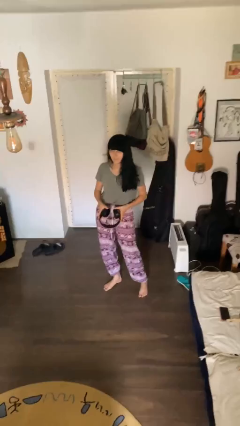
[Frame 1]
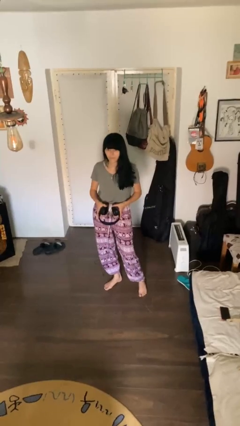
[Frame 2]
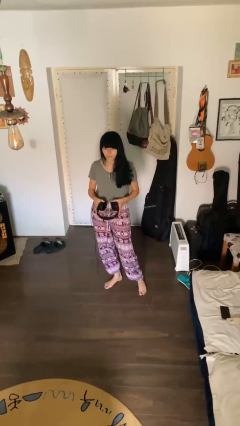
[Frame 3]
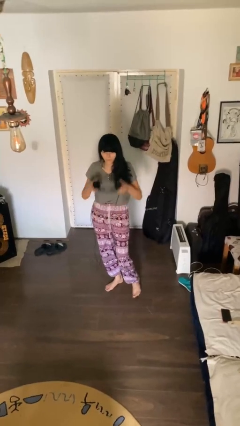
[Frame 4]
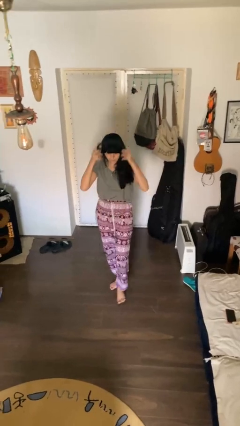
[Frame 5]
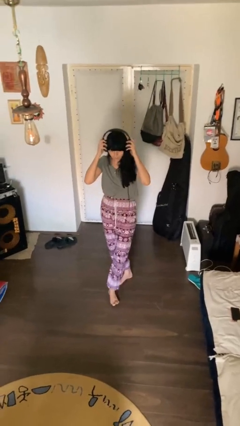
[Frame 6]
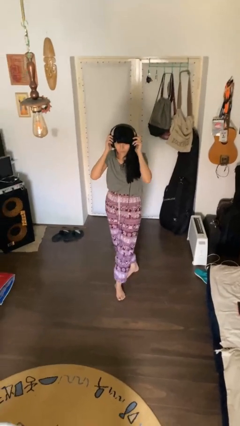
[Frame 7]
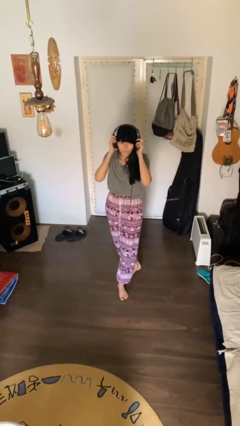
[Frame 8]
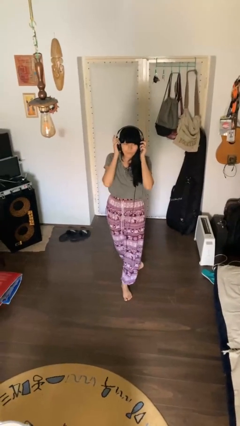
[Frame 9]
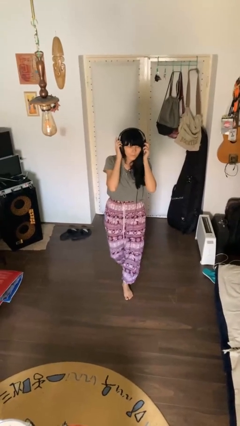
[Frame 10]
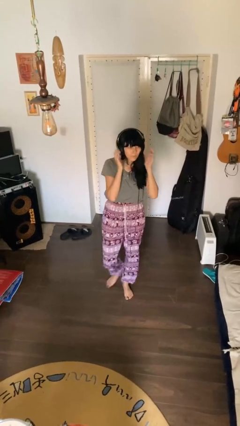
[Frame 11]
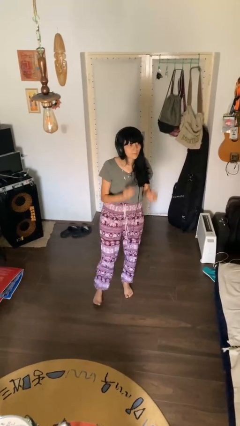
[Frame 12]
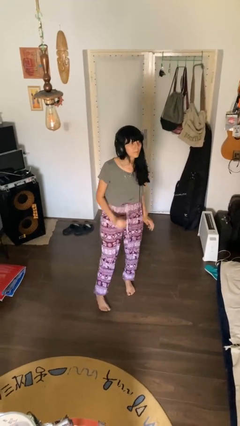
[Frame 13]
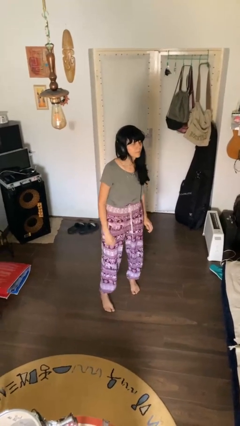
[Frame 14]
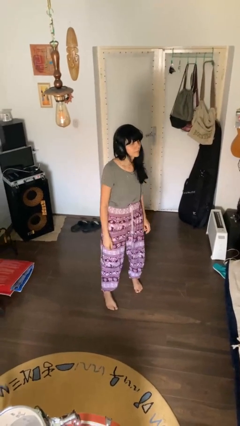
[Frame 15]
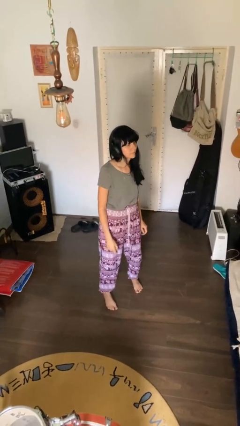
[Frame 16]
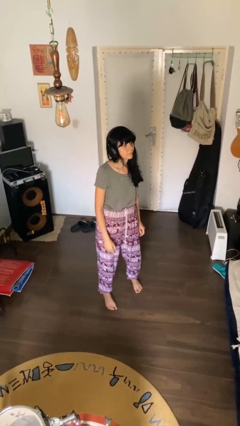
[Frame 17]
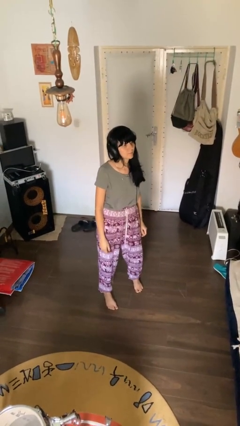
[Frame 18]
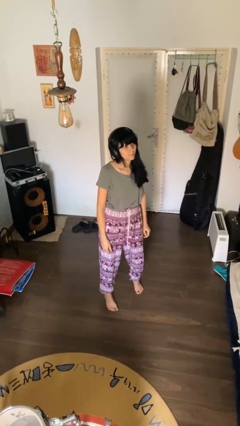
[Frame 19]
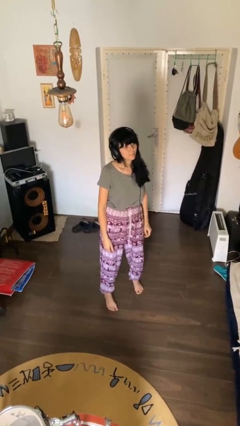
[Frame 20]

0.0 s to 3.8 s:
person puts on headphones

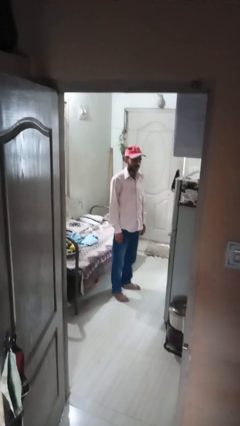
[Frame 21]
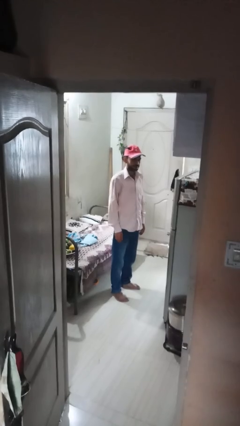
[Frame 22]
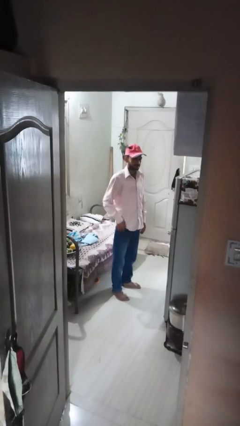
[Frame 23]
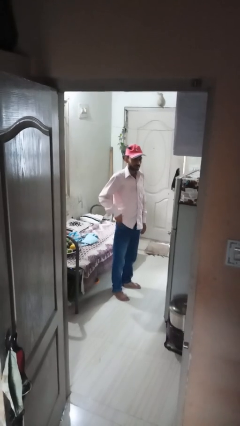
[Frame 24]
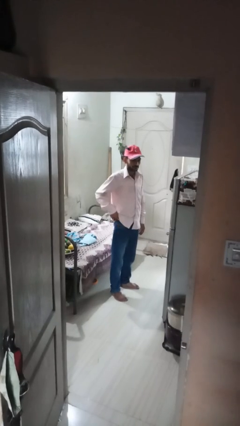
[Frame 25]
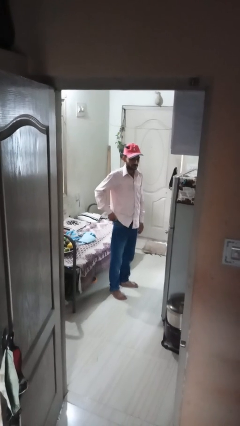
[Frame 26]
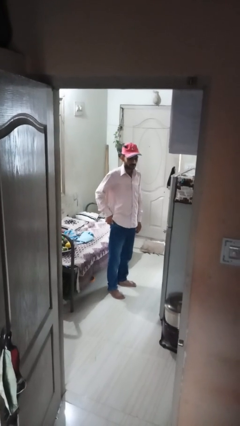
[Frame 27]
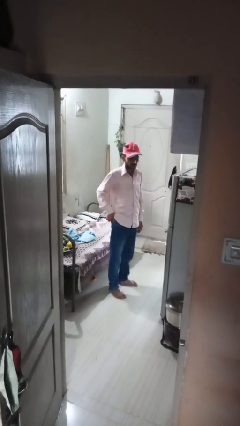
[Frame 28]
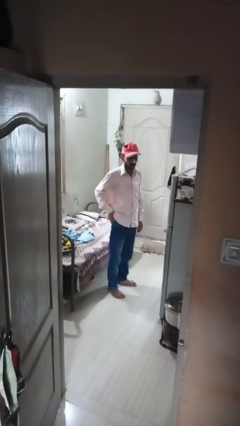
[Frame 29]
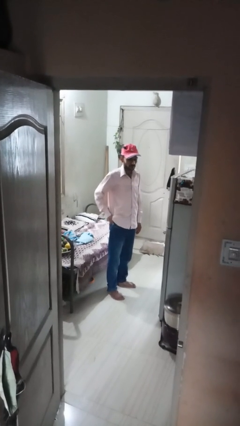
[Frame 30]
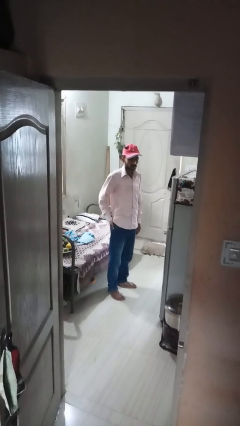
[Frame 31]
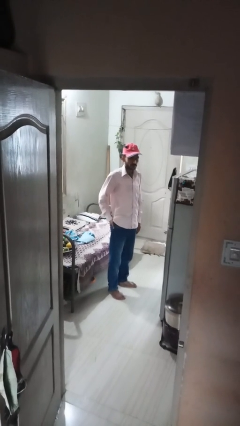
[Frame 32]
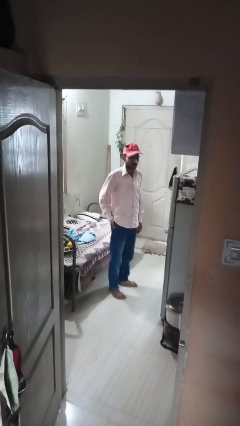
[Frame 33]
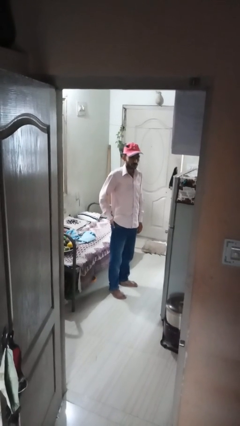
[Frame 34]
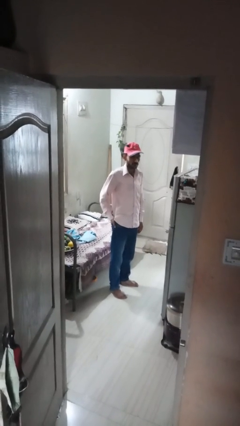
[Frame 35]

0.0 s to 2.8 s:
person puts hands in back pockets

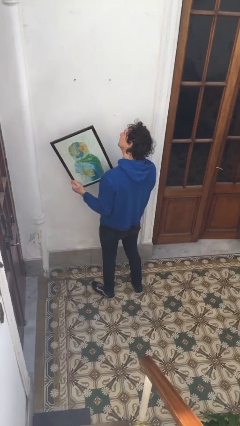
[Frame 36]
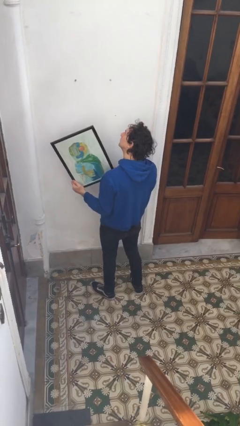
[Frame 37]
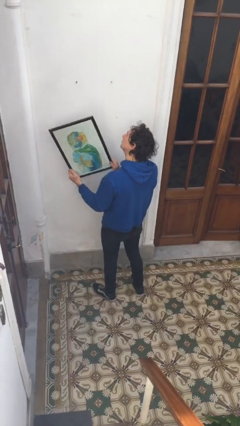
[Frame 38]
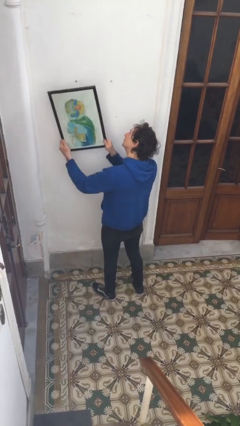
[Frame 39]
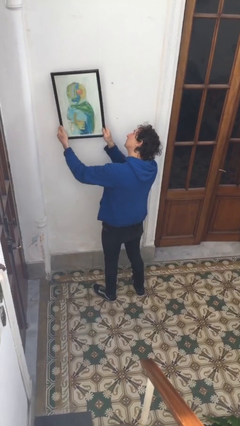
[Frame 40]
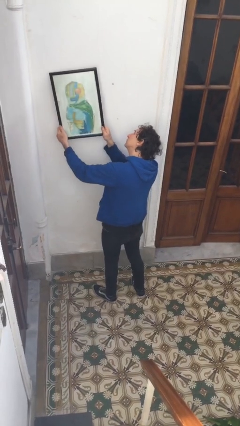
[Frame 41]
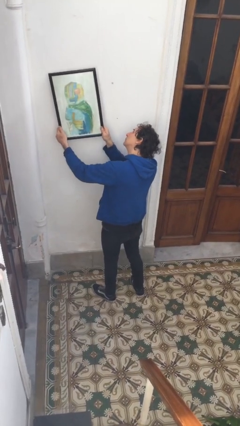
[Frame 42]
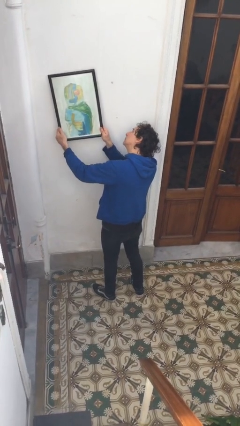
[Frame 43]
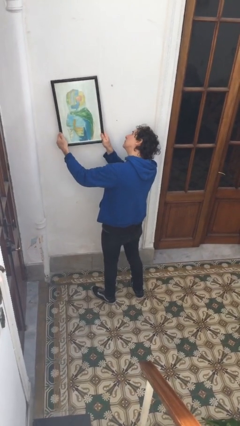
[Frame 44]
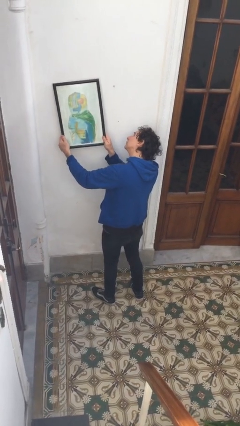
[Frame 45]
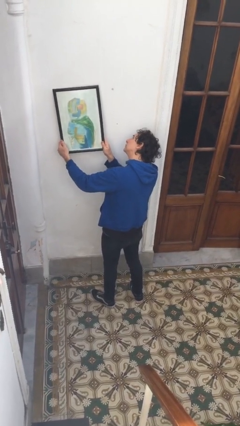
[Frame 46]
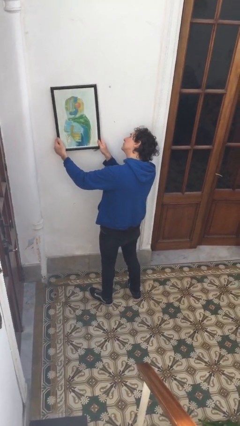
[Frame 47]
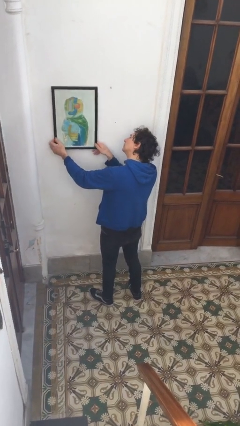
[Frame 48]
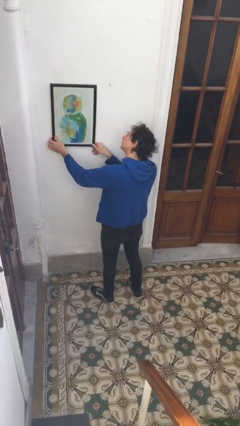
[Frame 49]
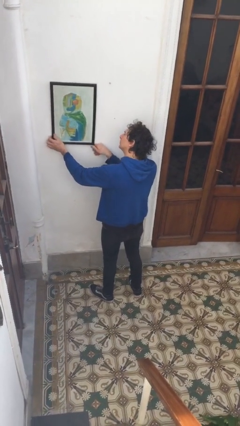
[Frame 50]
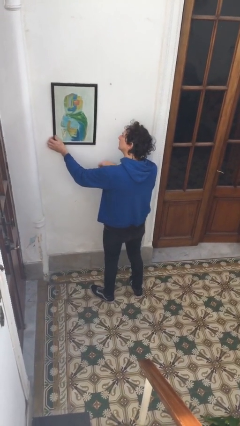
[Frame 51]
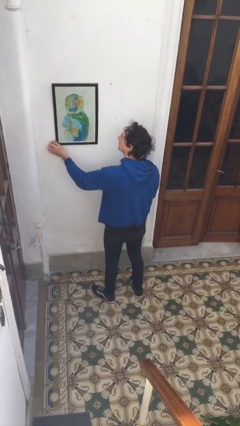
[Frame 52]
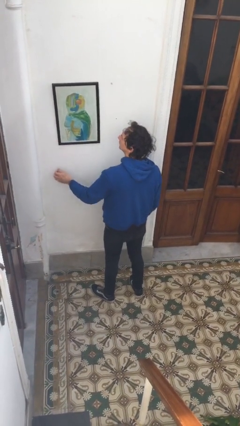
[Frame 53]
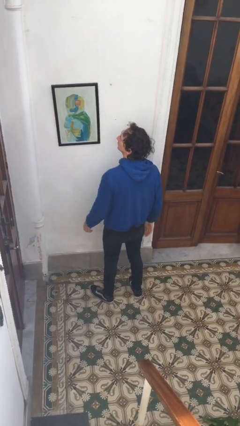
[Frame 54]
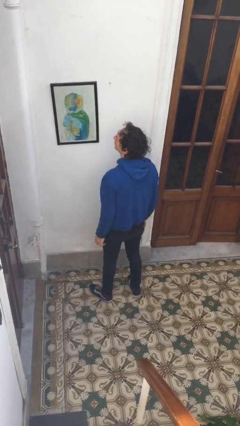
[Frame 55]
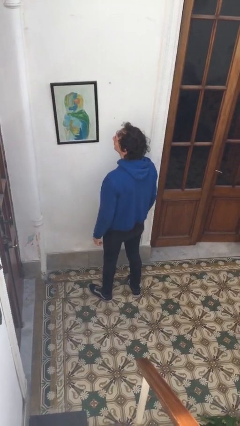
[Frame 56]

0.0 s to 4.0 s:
person puts up picture frame

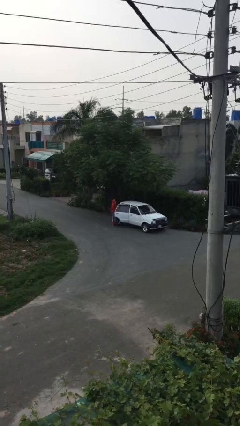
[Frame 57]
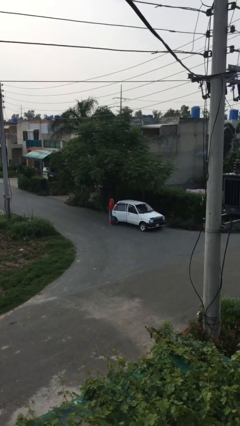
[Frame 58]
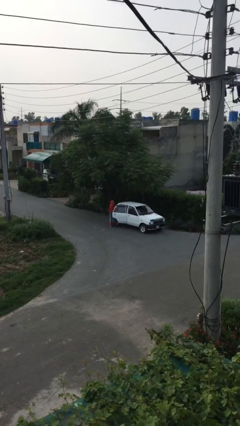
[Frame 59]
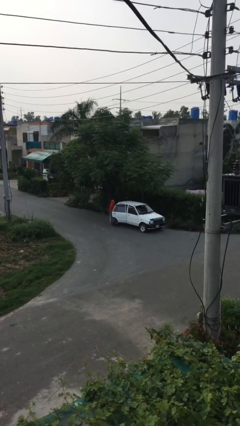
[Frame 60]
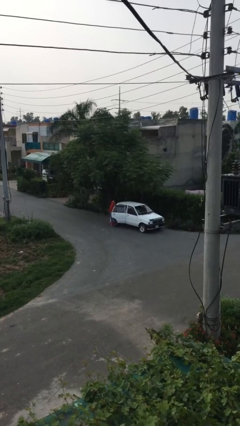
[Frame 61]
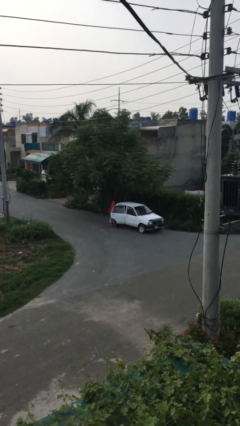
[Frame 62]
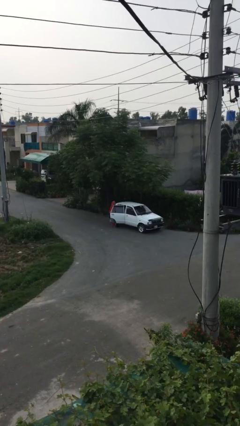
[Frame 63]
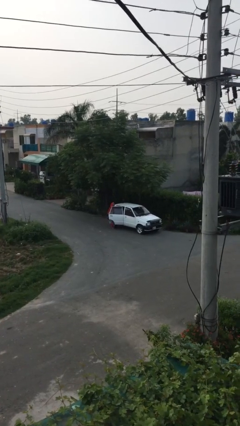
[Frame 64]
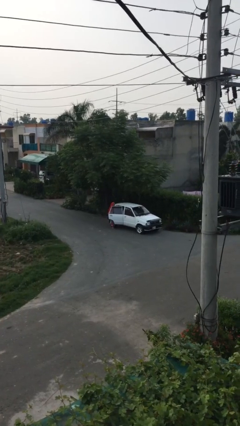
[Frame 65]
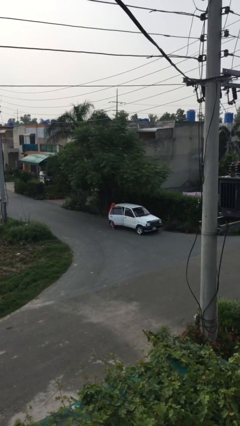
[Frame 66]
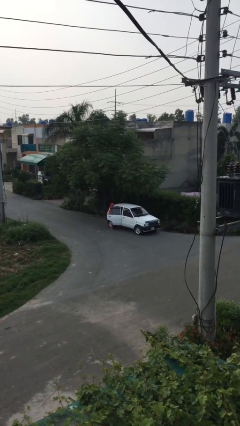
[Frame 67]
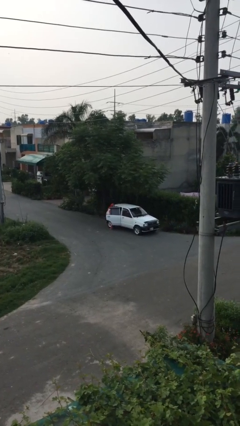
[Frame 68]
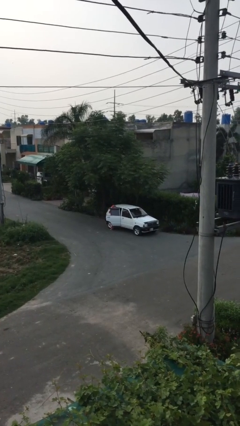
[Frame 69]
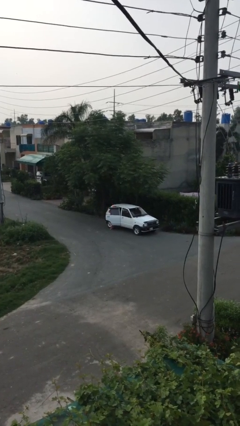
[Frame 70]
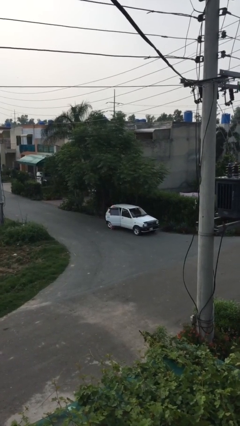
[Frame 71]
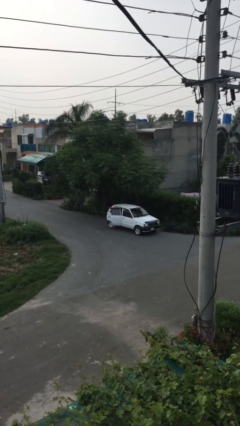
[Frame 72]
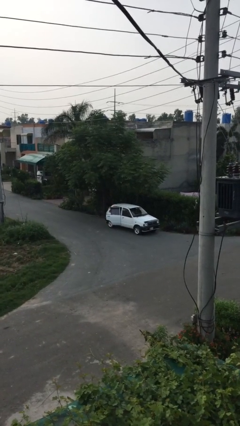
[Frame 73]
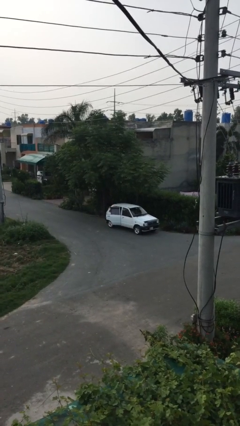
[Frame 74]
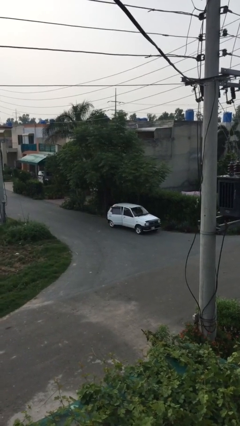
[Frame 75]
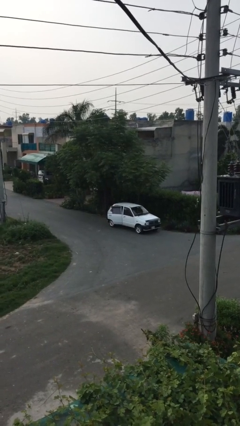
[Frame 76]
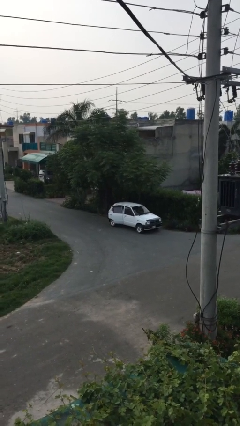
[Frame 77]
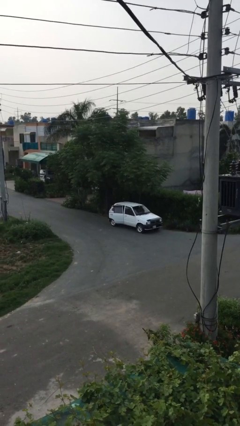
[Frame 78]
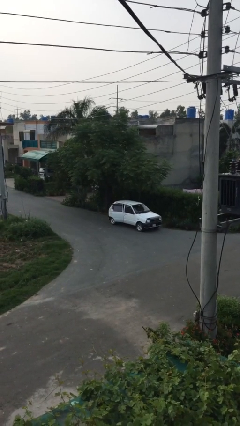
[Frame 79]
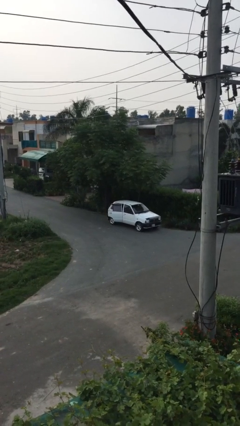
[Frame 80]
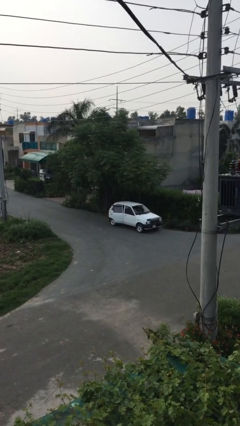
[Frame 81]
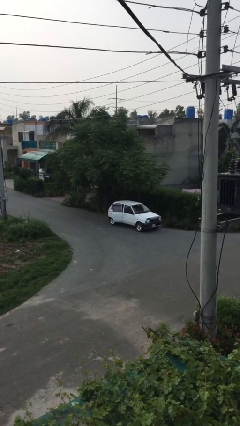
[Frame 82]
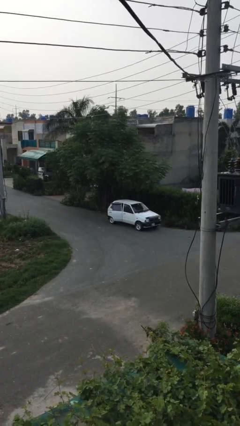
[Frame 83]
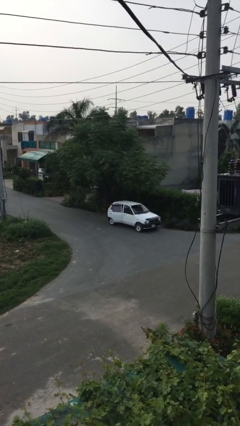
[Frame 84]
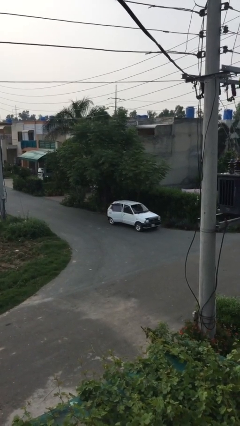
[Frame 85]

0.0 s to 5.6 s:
person enters car

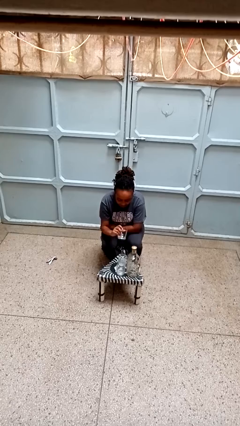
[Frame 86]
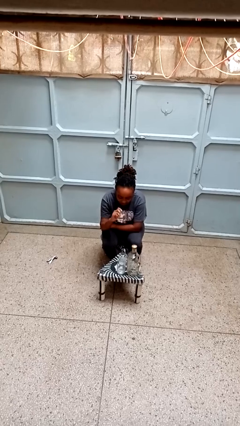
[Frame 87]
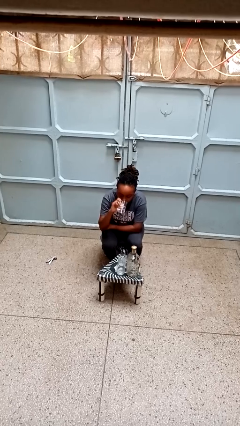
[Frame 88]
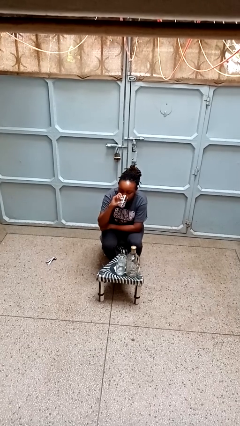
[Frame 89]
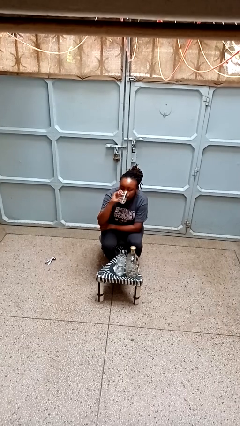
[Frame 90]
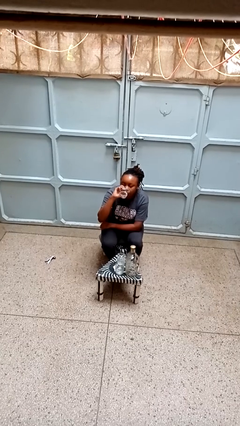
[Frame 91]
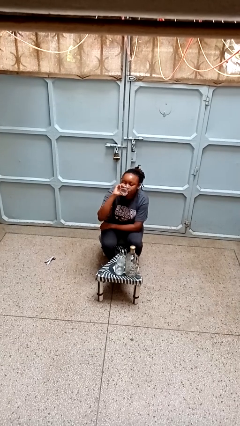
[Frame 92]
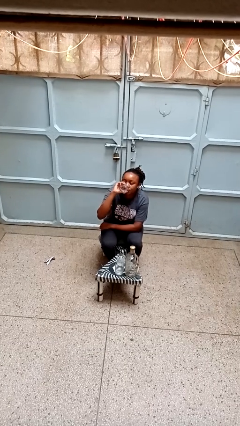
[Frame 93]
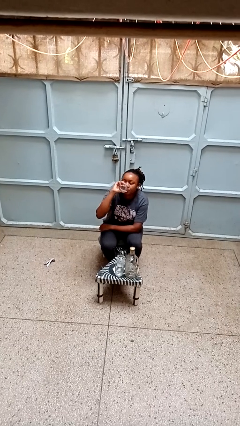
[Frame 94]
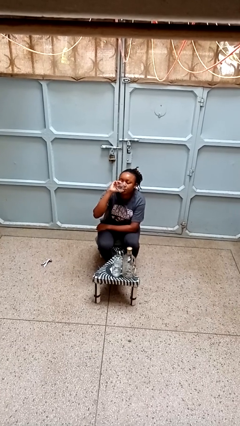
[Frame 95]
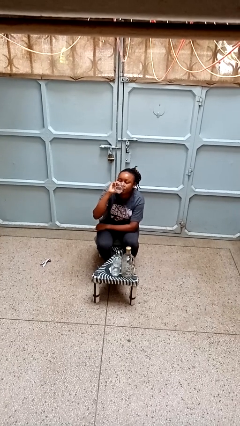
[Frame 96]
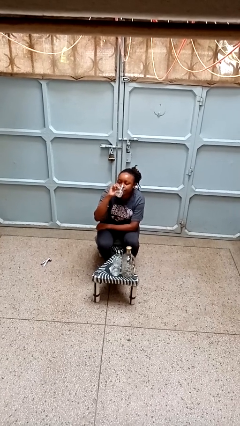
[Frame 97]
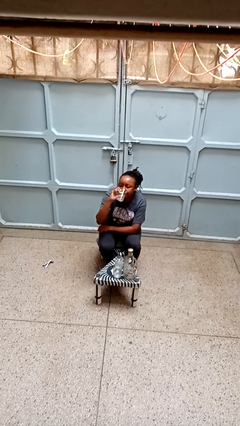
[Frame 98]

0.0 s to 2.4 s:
person drinks from shotglass
